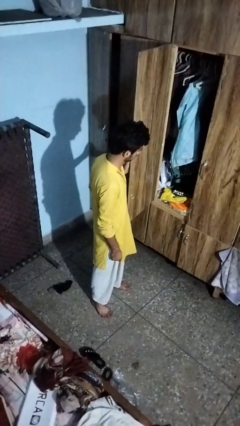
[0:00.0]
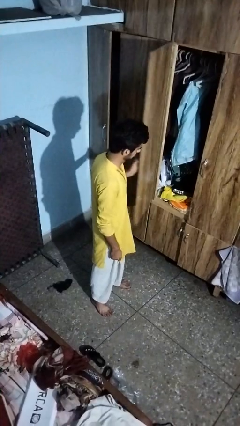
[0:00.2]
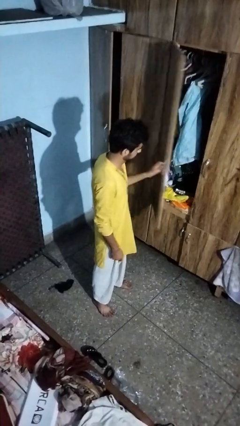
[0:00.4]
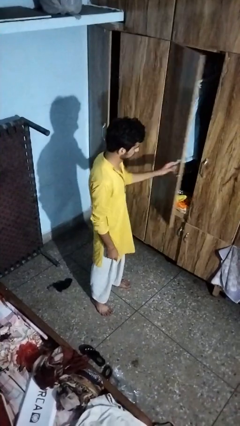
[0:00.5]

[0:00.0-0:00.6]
person closes closet door

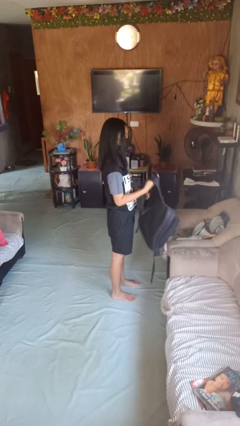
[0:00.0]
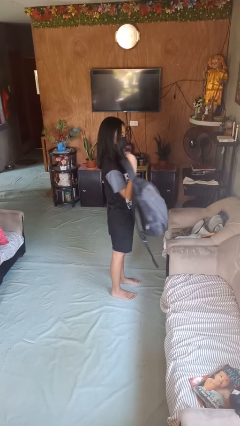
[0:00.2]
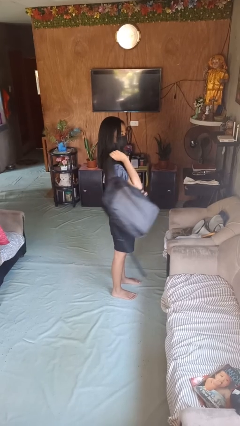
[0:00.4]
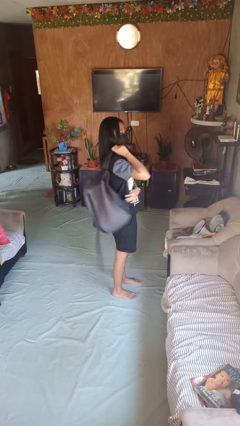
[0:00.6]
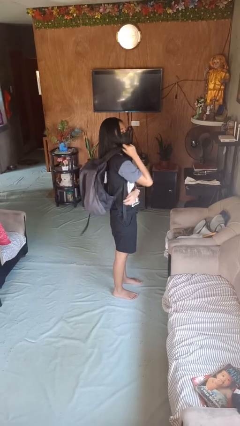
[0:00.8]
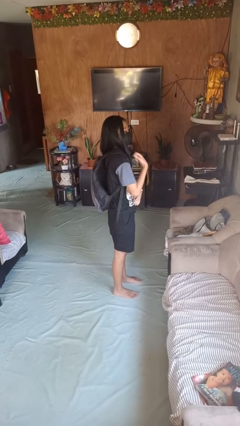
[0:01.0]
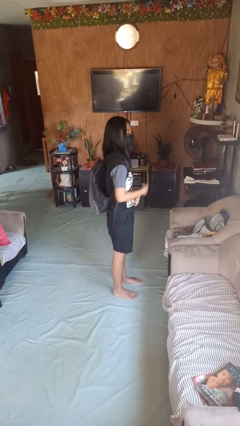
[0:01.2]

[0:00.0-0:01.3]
person puts on backpack

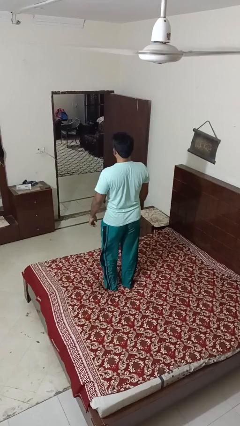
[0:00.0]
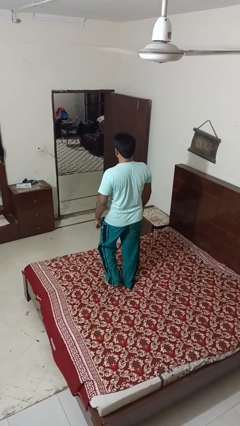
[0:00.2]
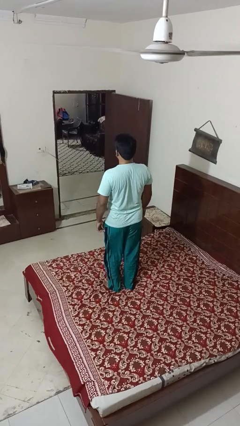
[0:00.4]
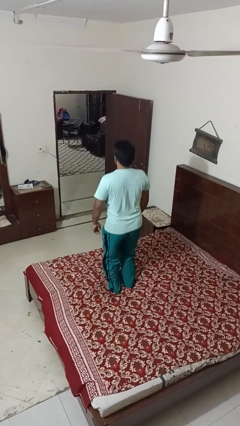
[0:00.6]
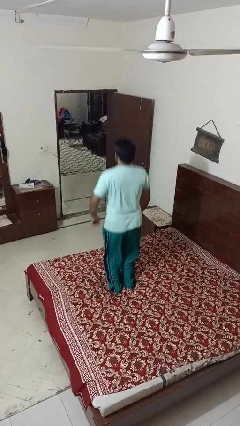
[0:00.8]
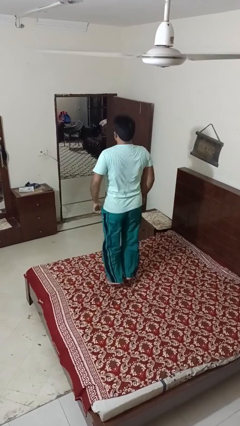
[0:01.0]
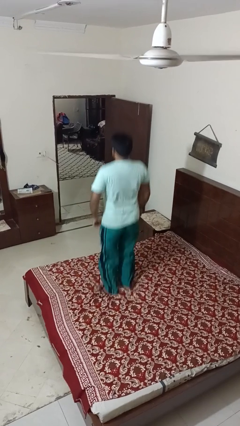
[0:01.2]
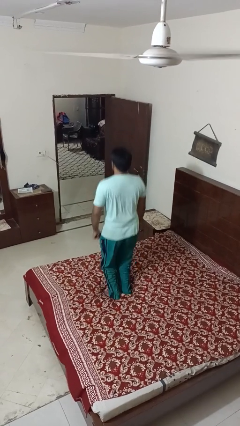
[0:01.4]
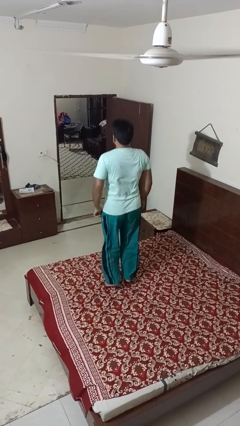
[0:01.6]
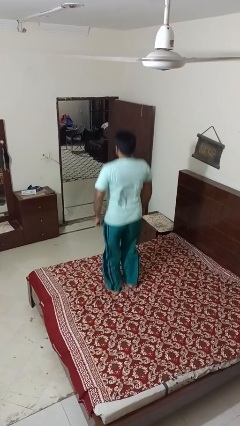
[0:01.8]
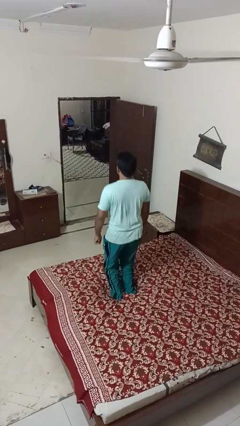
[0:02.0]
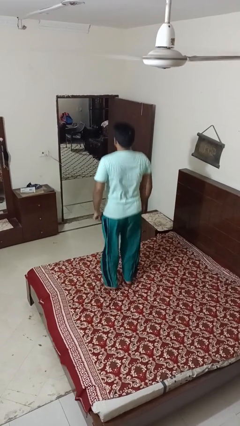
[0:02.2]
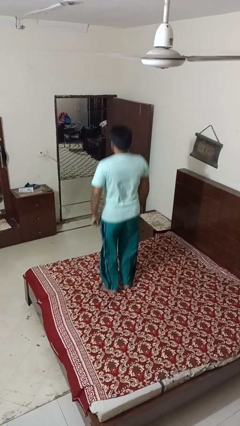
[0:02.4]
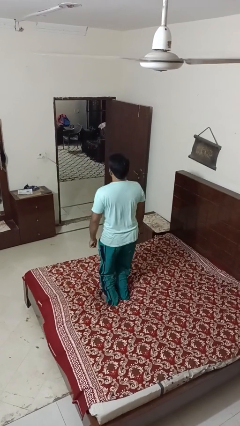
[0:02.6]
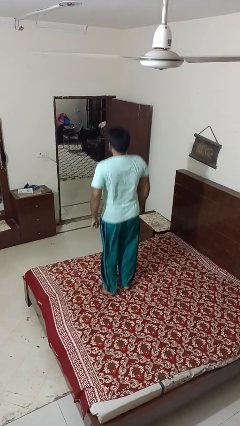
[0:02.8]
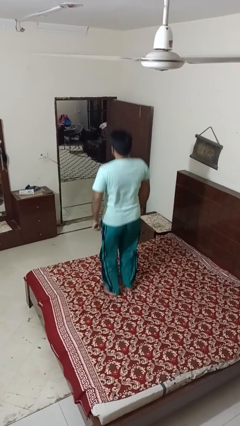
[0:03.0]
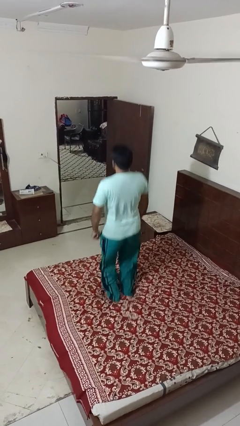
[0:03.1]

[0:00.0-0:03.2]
person jumps on bed

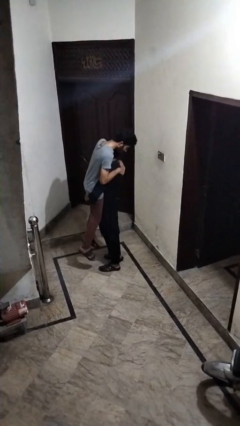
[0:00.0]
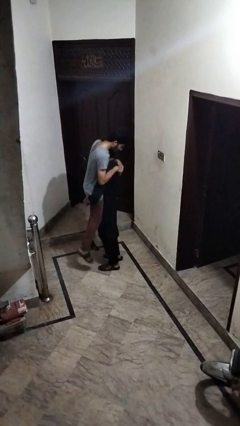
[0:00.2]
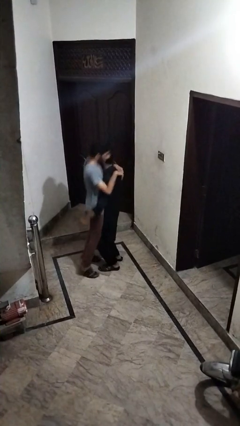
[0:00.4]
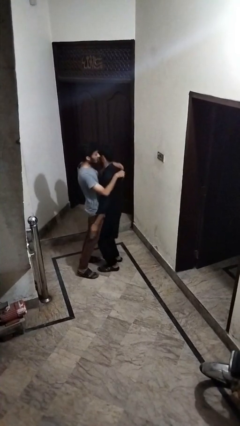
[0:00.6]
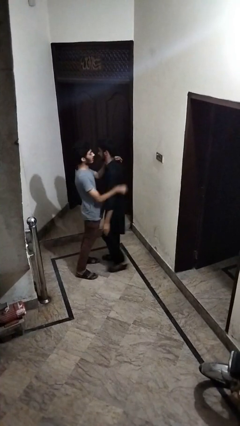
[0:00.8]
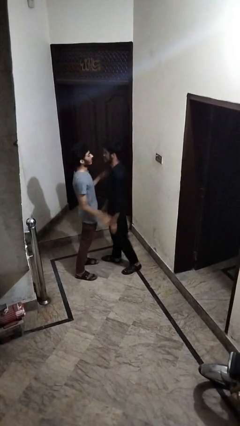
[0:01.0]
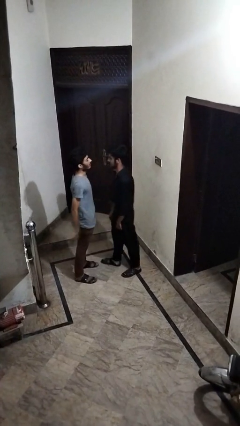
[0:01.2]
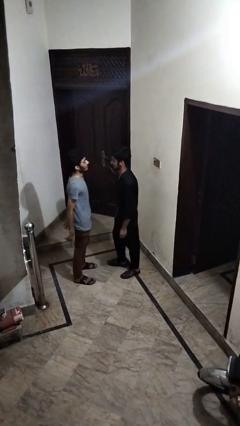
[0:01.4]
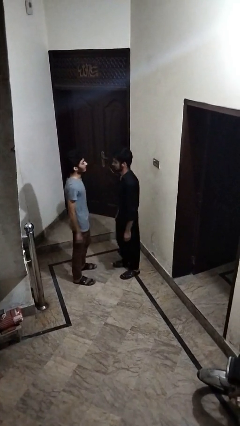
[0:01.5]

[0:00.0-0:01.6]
person puts down person

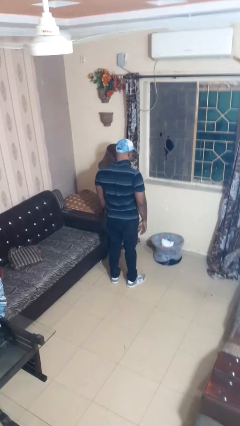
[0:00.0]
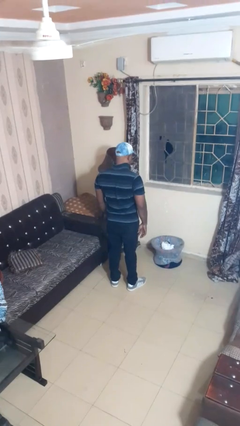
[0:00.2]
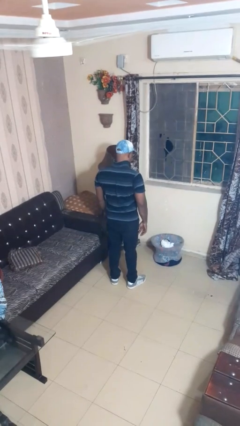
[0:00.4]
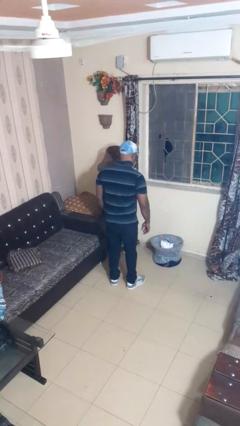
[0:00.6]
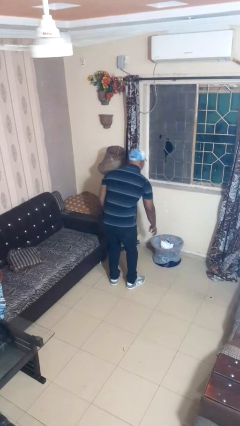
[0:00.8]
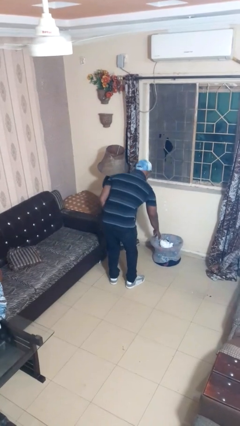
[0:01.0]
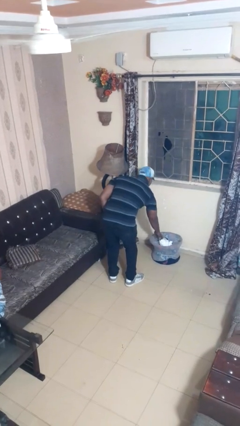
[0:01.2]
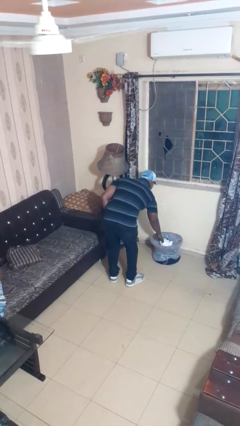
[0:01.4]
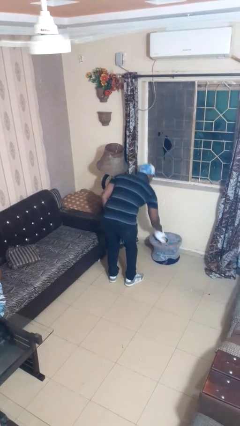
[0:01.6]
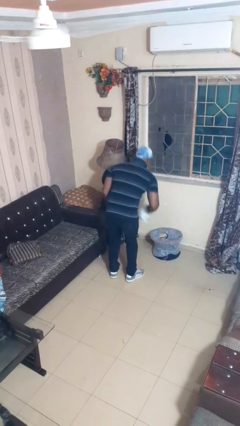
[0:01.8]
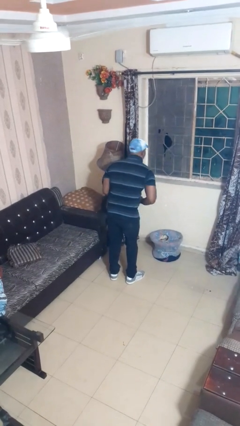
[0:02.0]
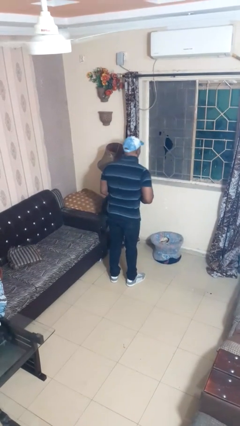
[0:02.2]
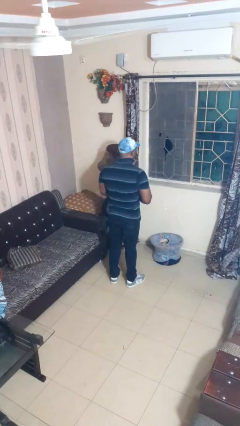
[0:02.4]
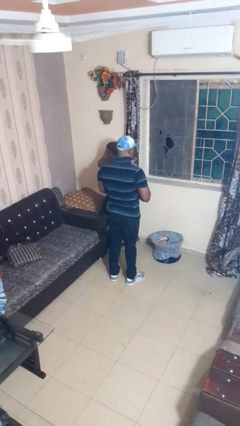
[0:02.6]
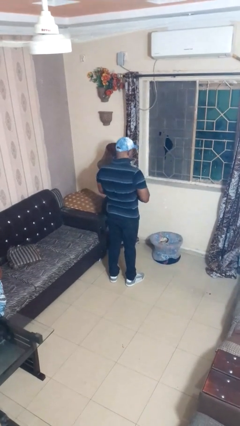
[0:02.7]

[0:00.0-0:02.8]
person takes object from basket

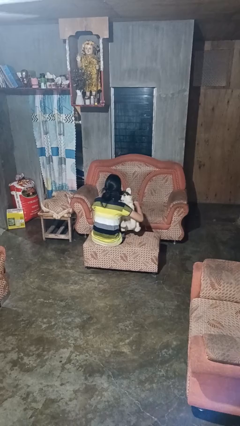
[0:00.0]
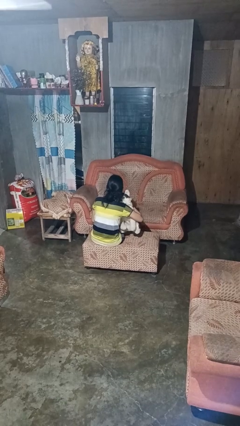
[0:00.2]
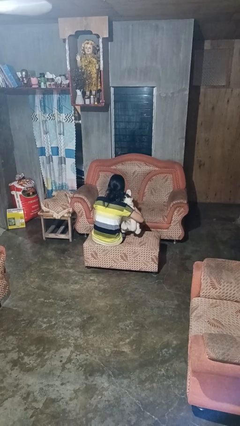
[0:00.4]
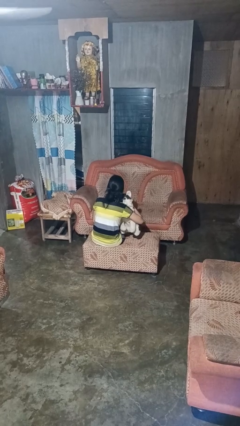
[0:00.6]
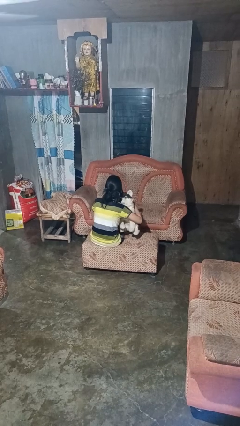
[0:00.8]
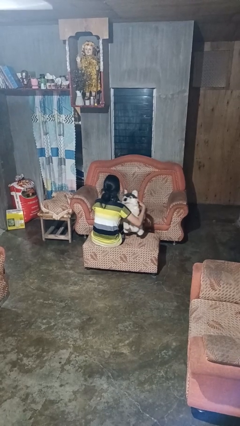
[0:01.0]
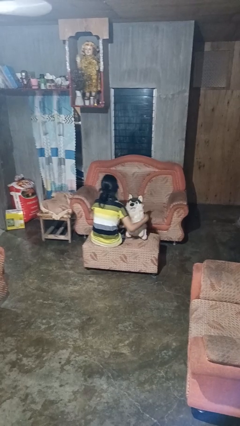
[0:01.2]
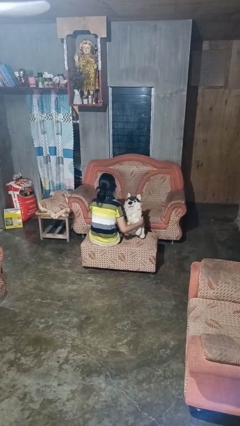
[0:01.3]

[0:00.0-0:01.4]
person hugs stuffed animal

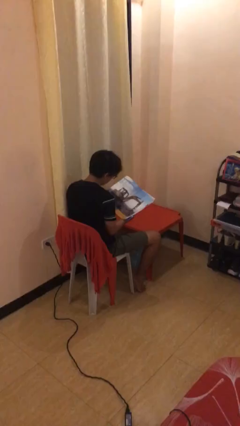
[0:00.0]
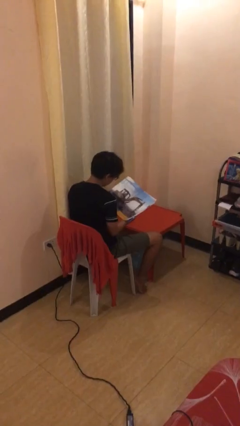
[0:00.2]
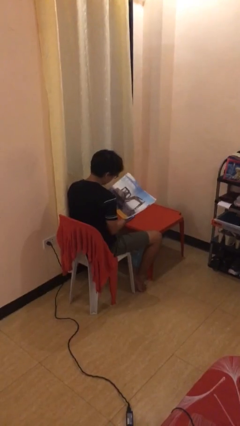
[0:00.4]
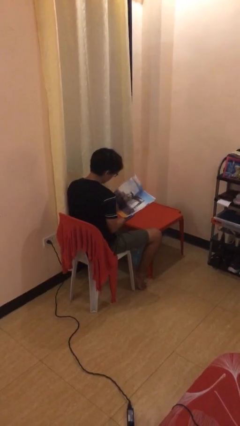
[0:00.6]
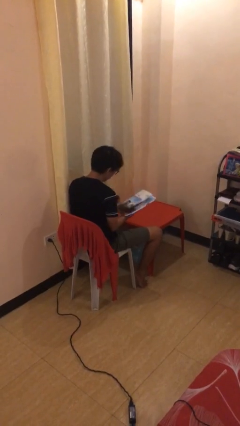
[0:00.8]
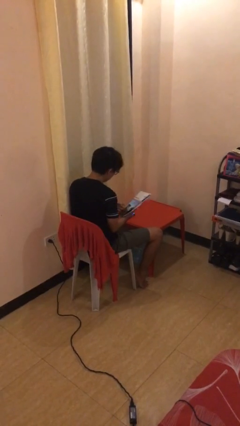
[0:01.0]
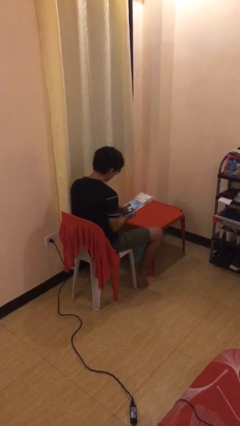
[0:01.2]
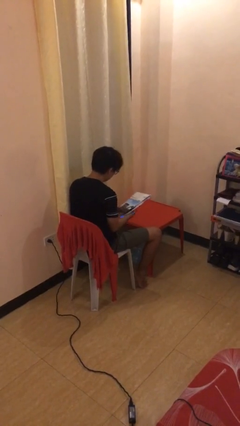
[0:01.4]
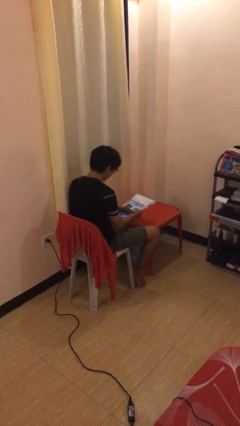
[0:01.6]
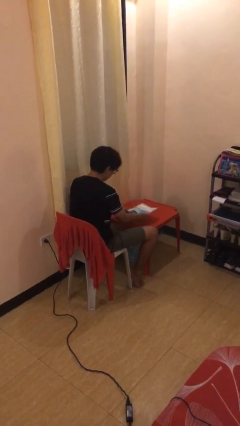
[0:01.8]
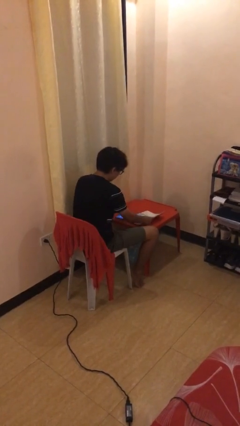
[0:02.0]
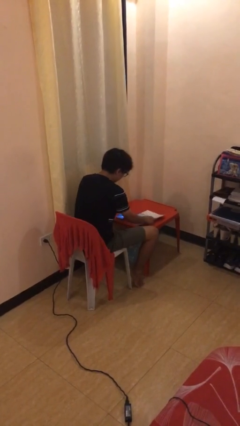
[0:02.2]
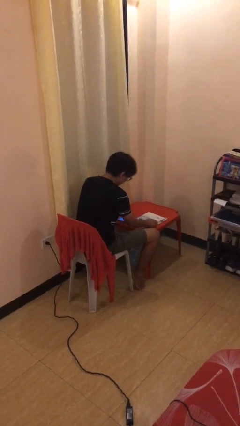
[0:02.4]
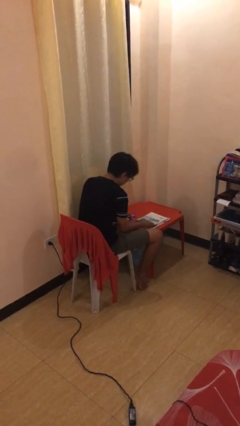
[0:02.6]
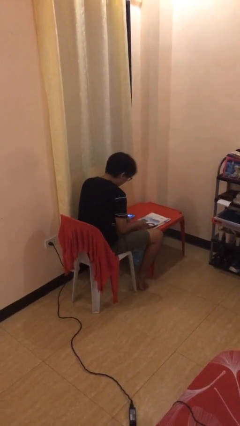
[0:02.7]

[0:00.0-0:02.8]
person puts down object on table

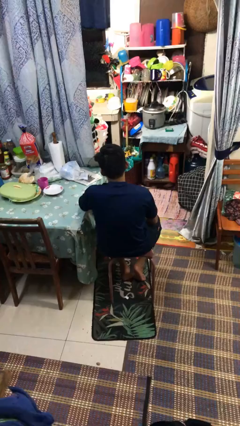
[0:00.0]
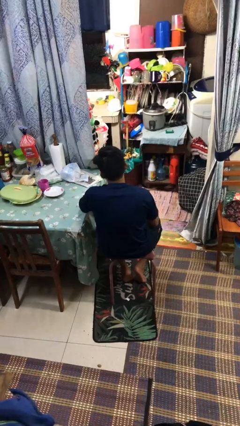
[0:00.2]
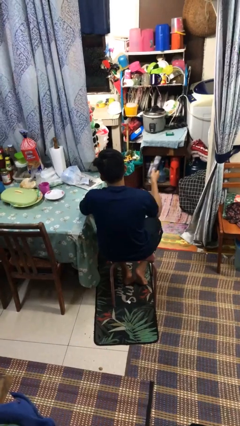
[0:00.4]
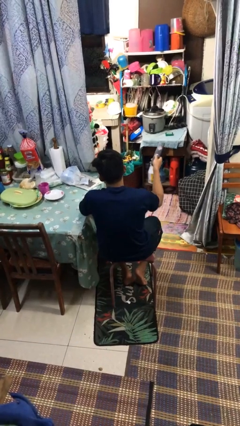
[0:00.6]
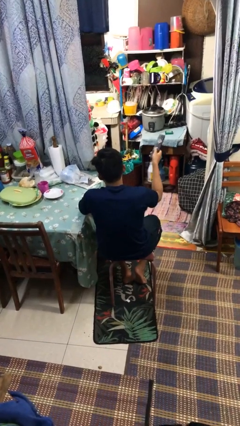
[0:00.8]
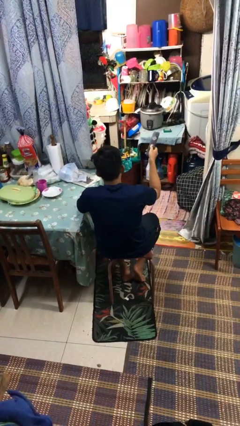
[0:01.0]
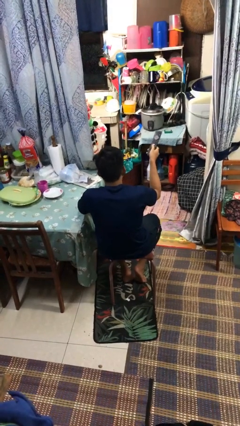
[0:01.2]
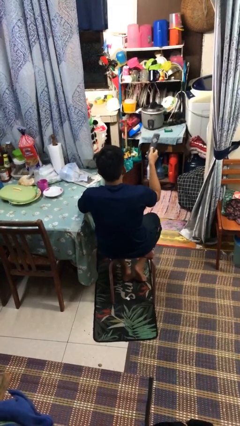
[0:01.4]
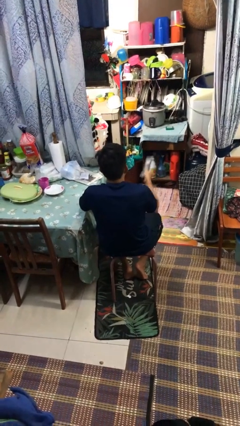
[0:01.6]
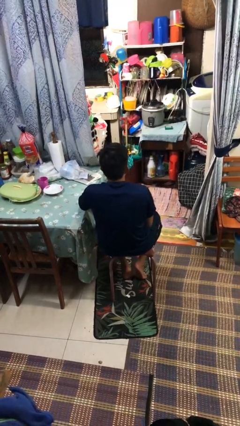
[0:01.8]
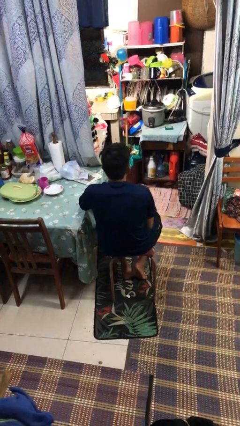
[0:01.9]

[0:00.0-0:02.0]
person uses television remote

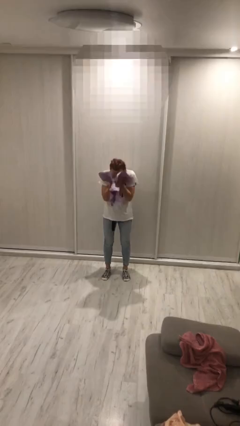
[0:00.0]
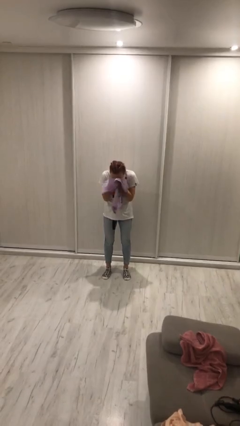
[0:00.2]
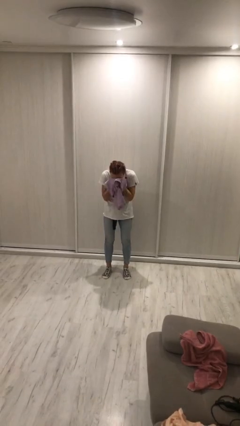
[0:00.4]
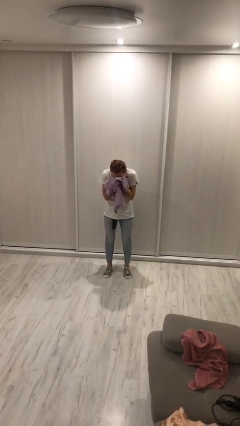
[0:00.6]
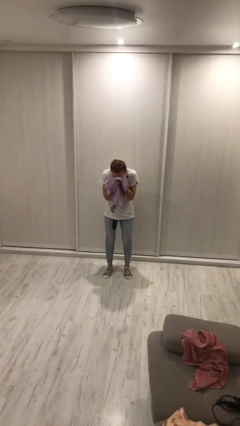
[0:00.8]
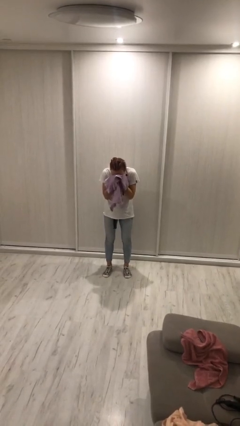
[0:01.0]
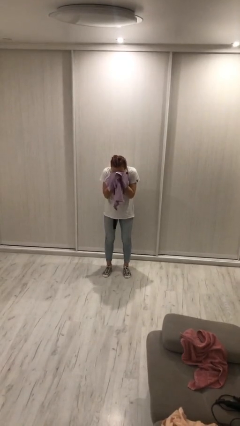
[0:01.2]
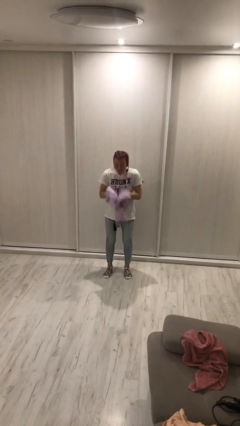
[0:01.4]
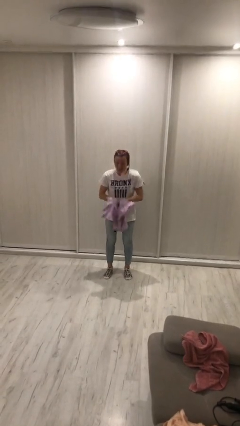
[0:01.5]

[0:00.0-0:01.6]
person blows nose
